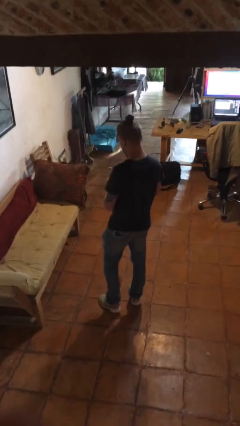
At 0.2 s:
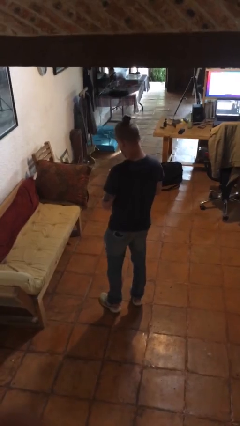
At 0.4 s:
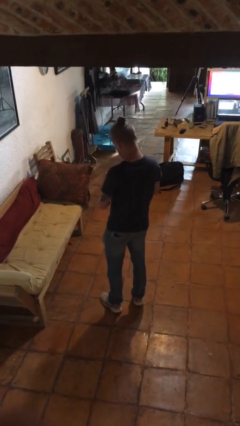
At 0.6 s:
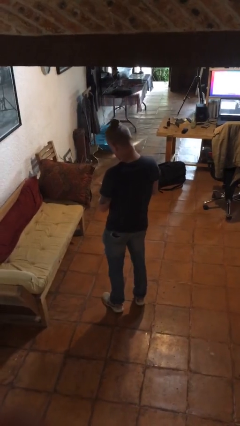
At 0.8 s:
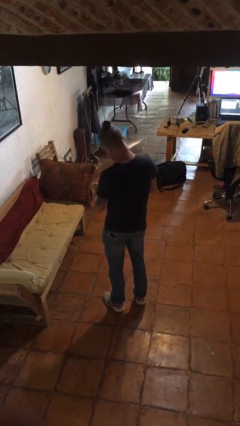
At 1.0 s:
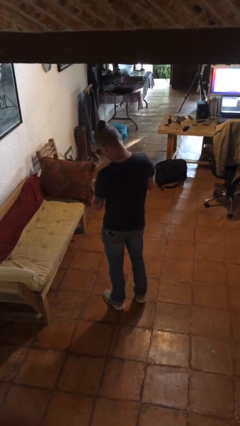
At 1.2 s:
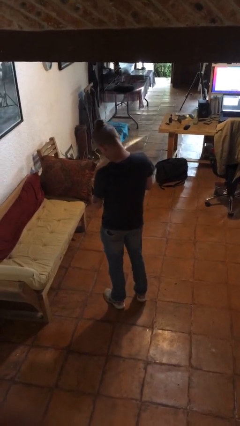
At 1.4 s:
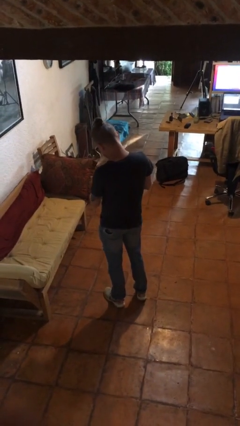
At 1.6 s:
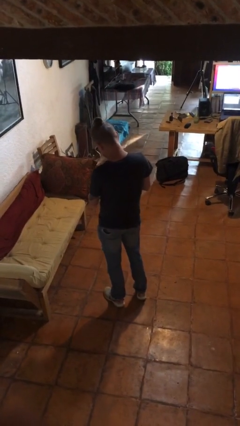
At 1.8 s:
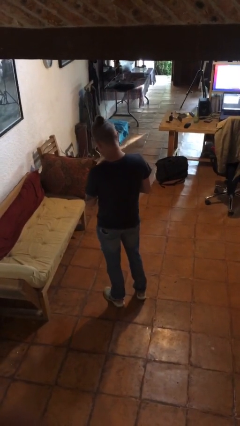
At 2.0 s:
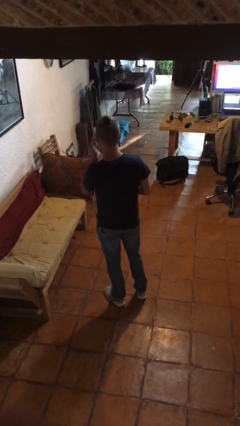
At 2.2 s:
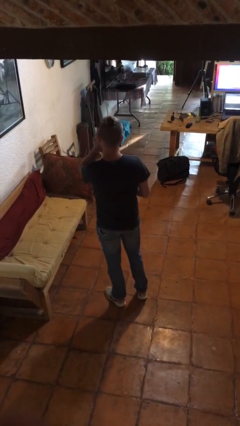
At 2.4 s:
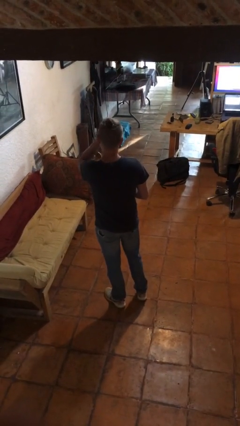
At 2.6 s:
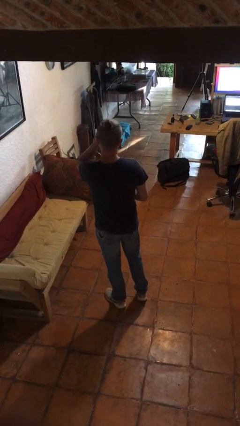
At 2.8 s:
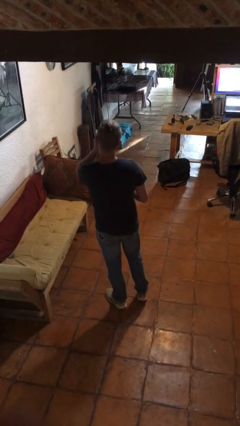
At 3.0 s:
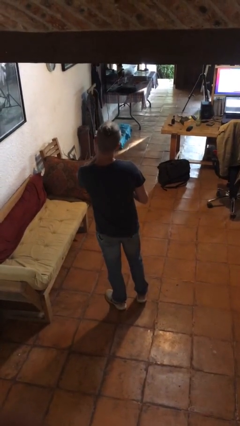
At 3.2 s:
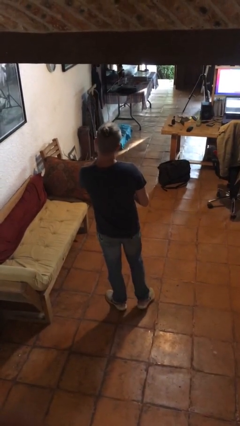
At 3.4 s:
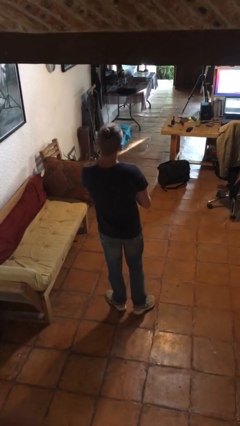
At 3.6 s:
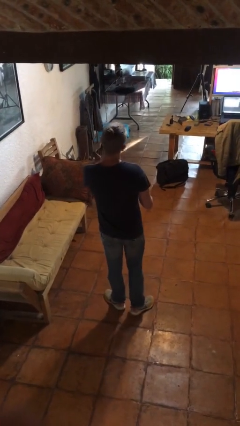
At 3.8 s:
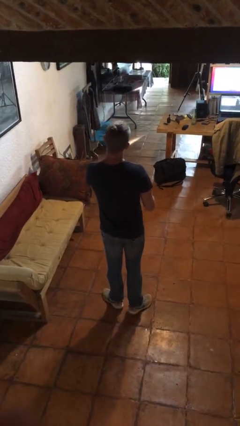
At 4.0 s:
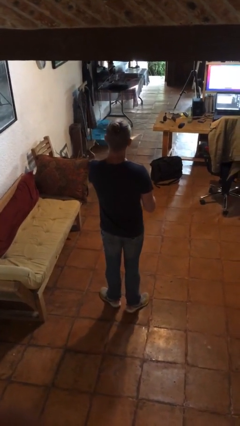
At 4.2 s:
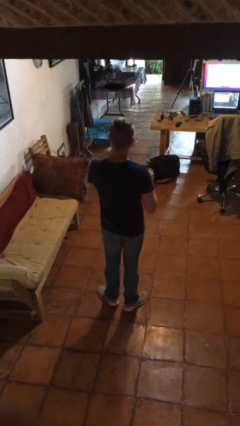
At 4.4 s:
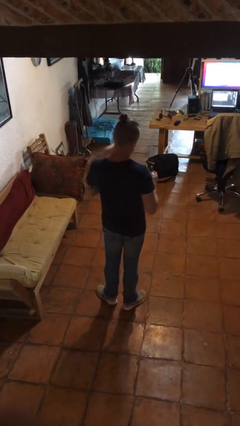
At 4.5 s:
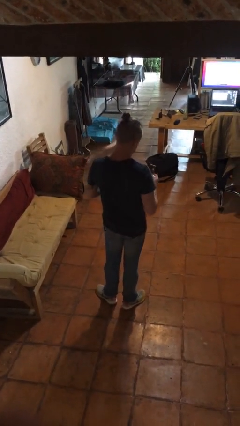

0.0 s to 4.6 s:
person applies facial moisturizer

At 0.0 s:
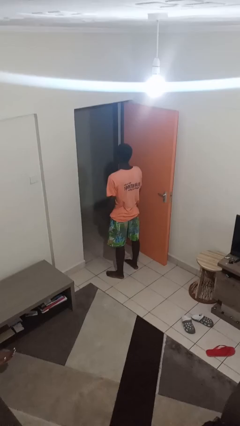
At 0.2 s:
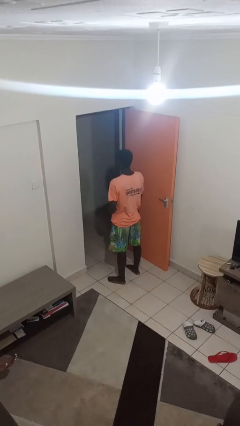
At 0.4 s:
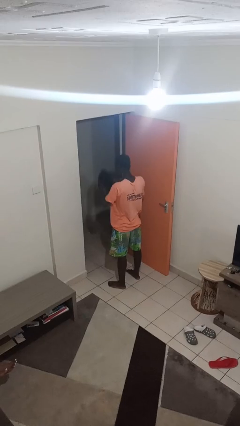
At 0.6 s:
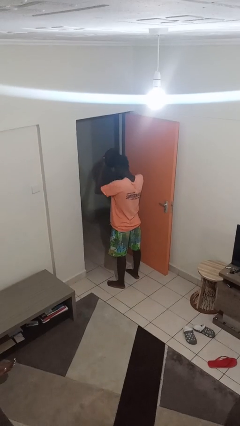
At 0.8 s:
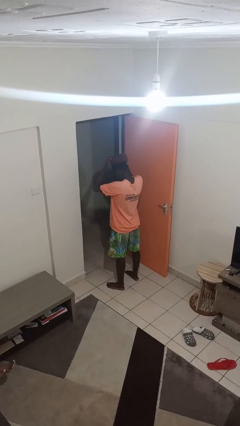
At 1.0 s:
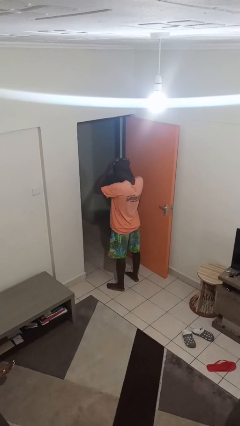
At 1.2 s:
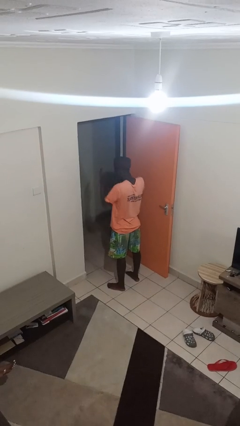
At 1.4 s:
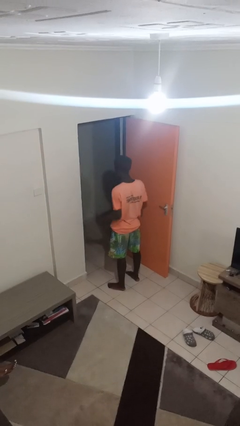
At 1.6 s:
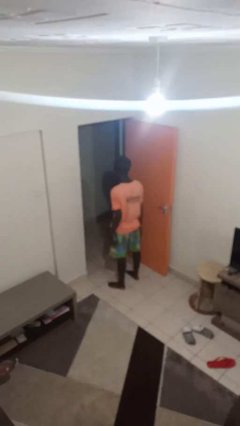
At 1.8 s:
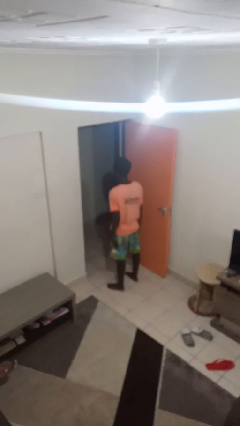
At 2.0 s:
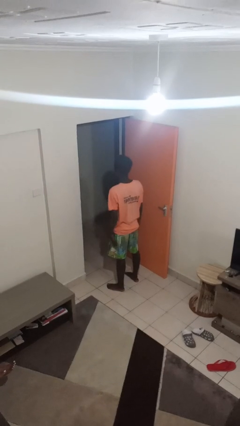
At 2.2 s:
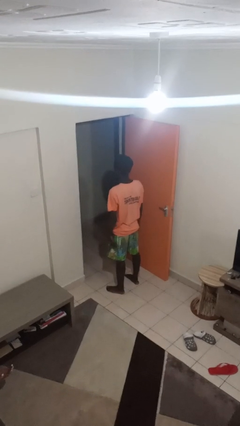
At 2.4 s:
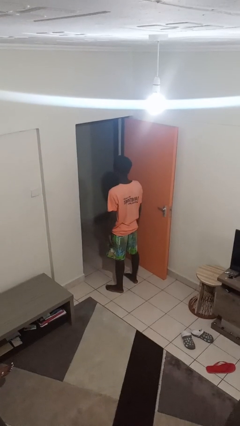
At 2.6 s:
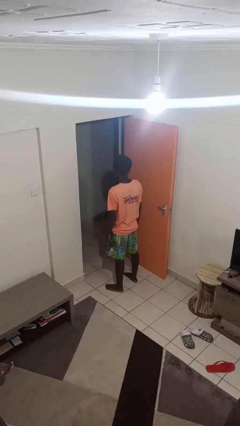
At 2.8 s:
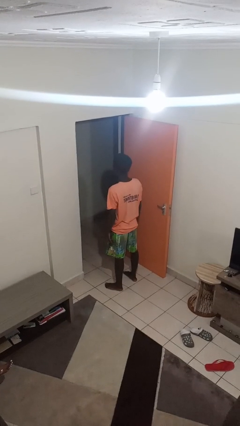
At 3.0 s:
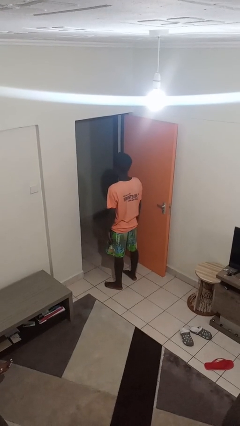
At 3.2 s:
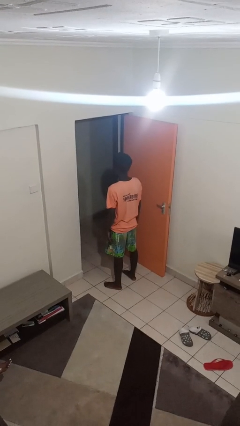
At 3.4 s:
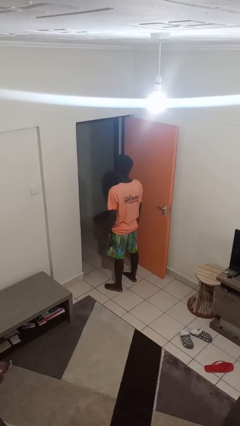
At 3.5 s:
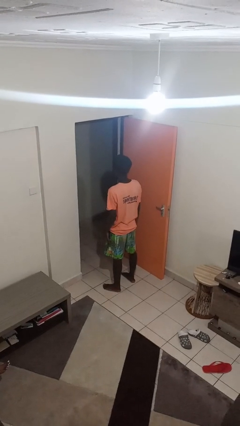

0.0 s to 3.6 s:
person puts on hat

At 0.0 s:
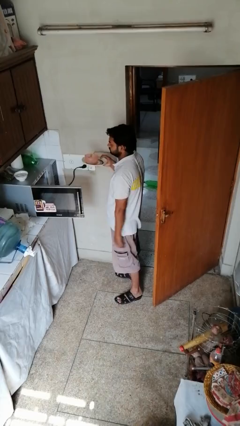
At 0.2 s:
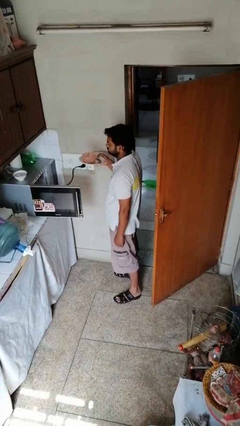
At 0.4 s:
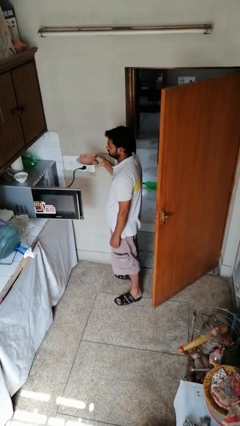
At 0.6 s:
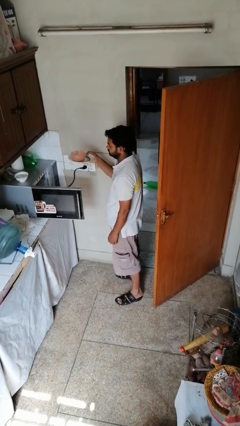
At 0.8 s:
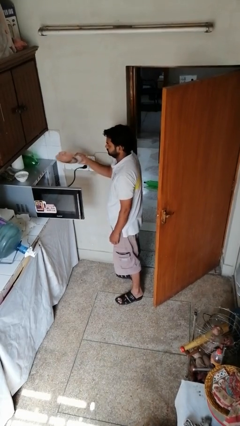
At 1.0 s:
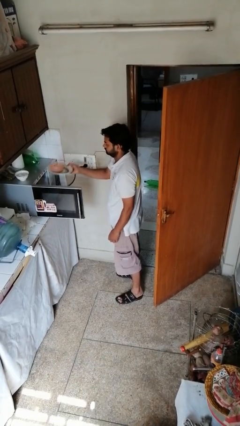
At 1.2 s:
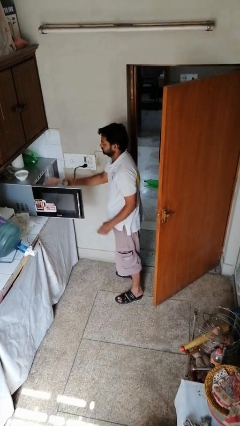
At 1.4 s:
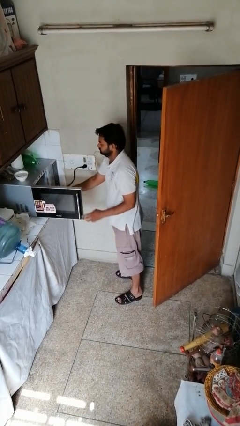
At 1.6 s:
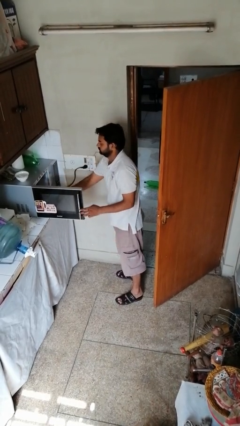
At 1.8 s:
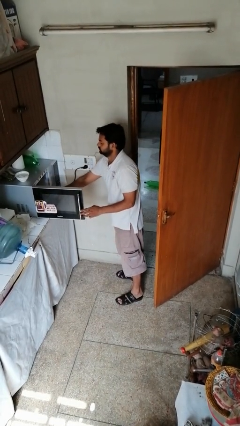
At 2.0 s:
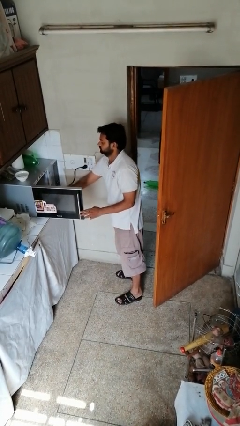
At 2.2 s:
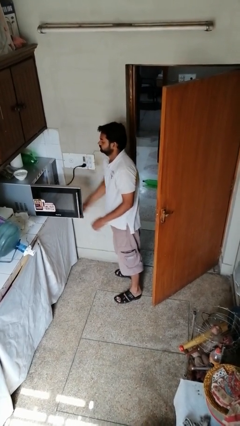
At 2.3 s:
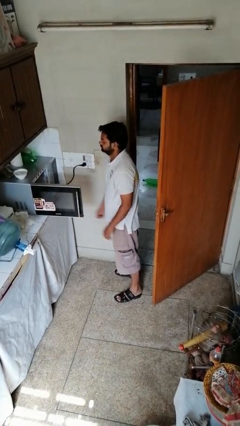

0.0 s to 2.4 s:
person puts object into microwave

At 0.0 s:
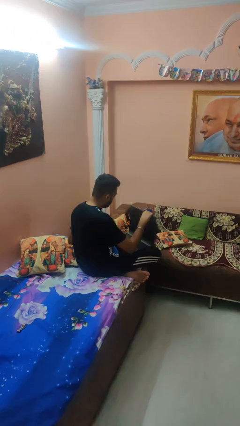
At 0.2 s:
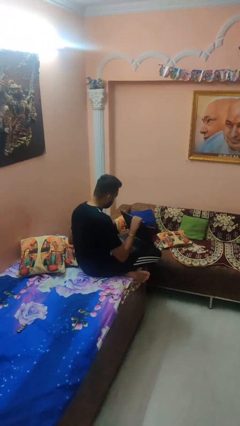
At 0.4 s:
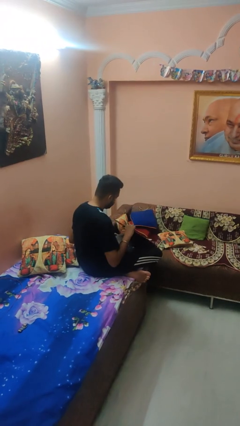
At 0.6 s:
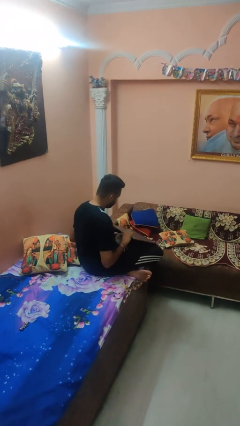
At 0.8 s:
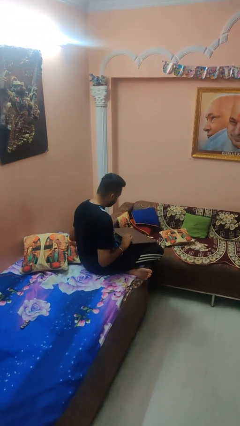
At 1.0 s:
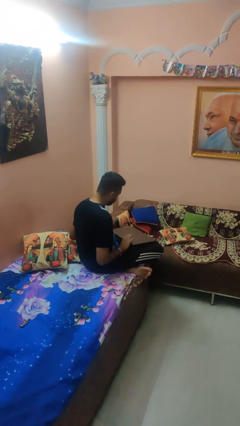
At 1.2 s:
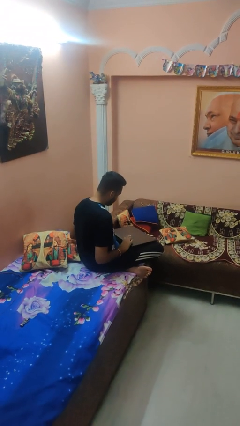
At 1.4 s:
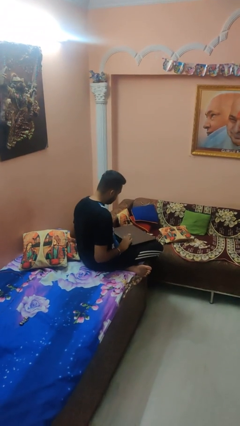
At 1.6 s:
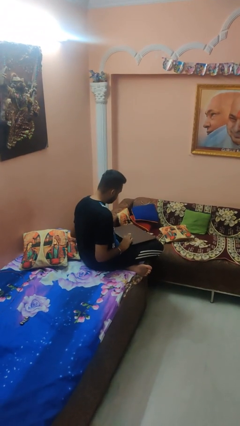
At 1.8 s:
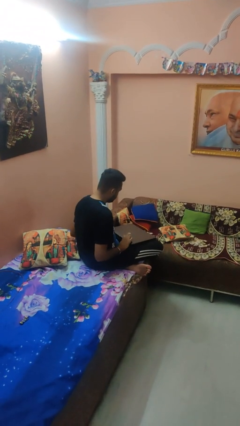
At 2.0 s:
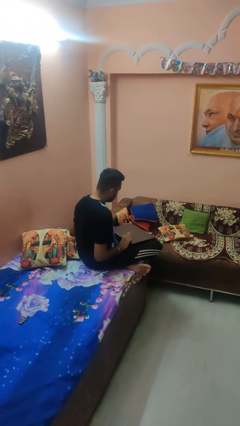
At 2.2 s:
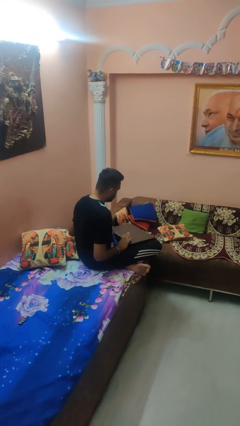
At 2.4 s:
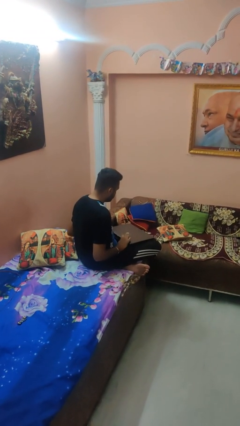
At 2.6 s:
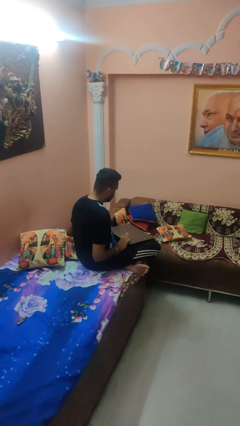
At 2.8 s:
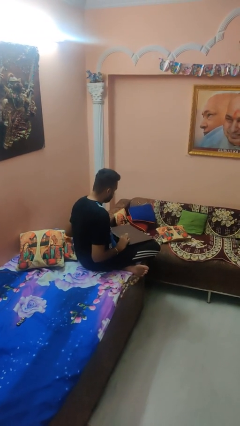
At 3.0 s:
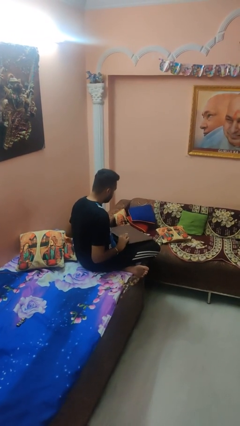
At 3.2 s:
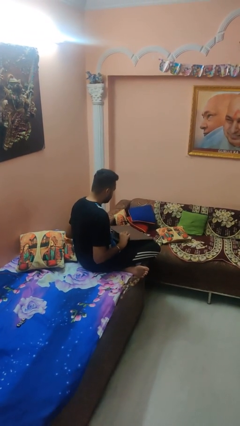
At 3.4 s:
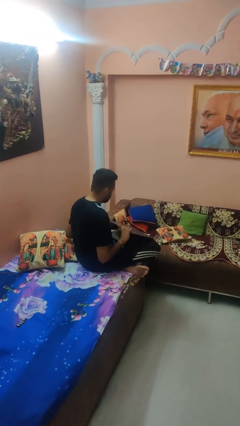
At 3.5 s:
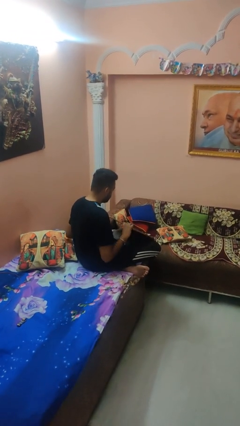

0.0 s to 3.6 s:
person closes laptop

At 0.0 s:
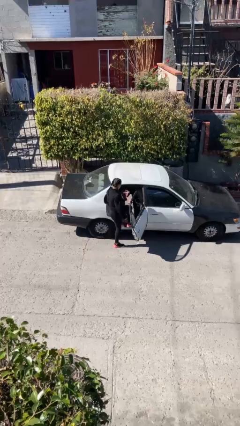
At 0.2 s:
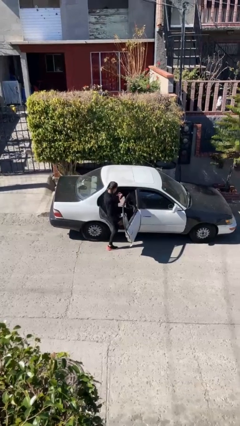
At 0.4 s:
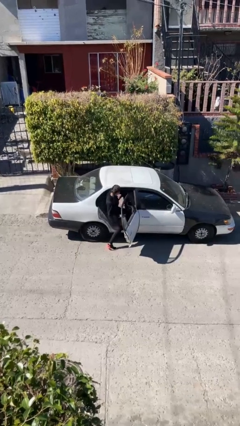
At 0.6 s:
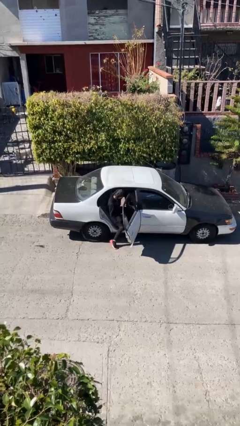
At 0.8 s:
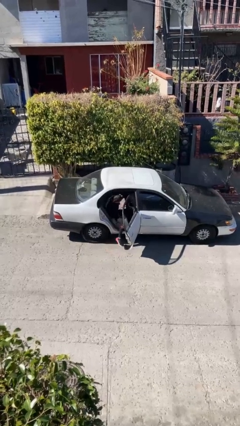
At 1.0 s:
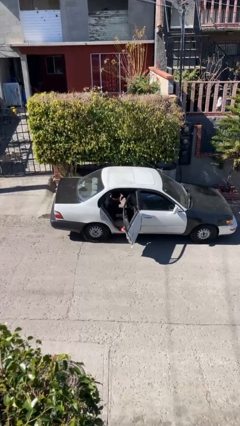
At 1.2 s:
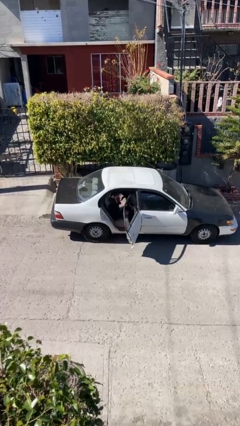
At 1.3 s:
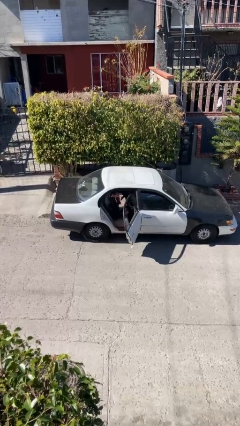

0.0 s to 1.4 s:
person enters car

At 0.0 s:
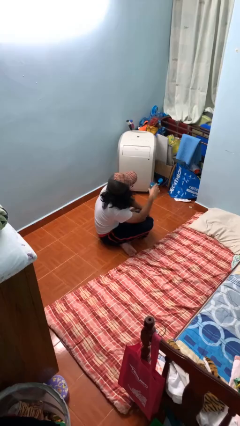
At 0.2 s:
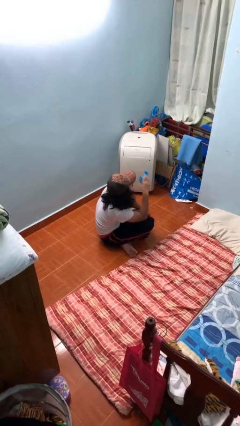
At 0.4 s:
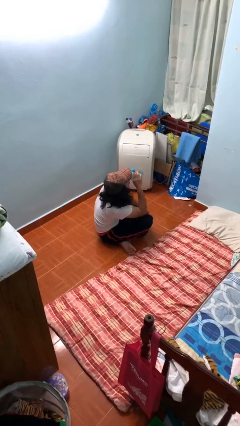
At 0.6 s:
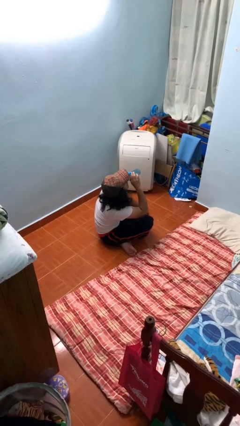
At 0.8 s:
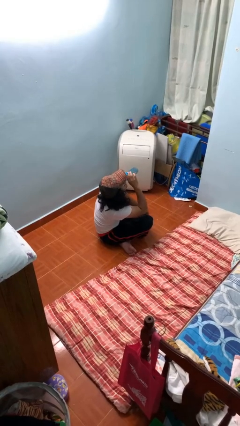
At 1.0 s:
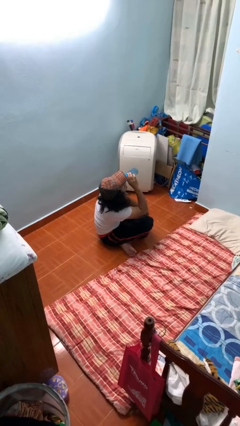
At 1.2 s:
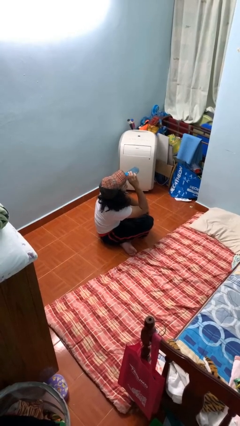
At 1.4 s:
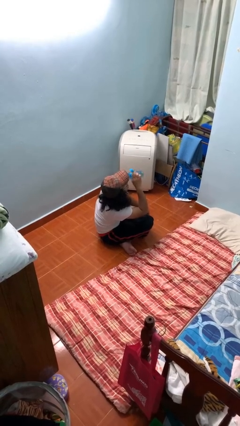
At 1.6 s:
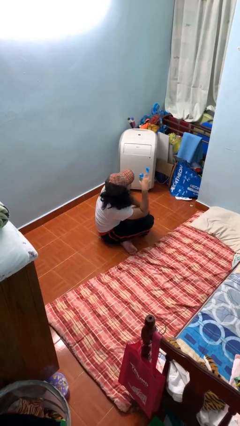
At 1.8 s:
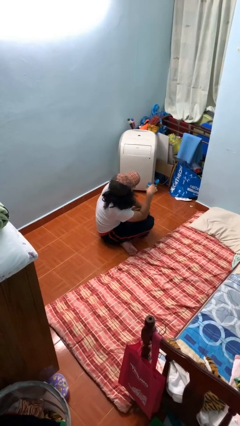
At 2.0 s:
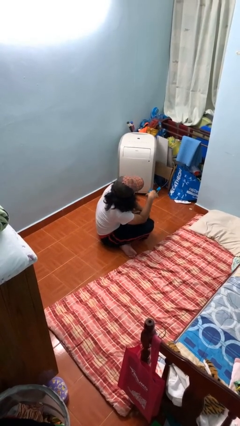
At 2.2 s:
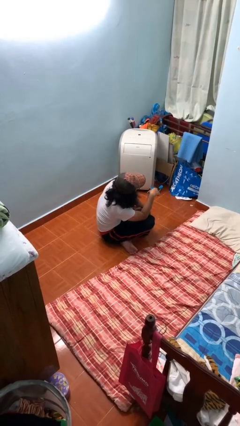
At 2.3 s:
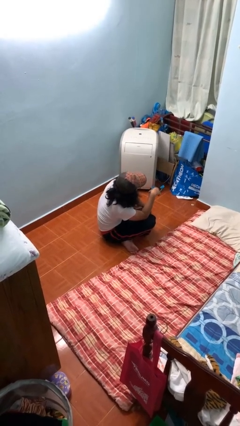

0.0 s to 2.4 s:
person drinks from bottle
